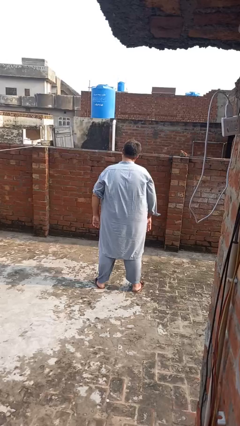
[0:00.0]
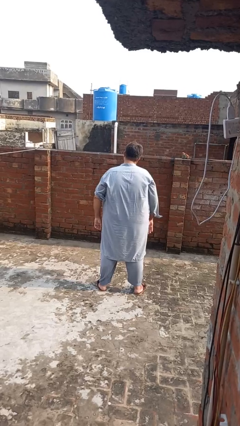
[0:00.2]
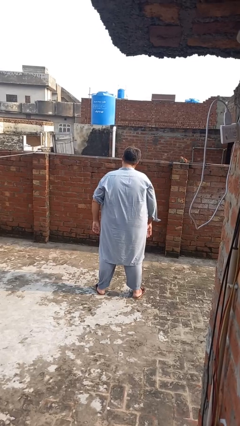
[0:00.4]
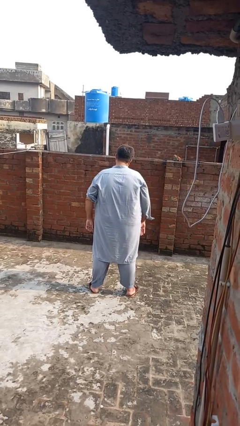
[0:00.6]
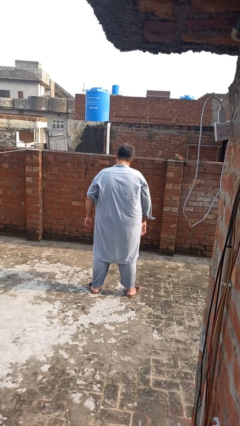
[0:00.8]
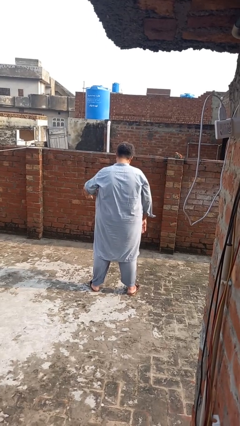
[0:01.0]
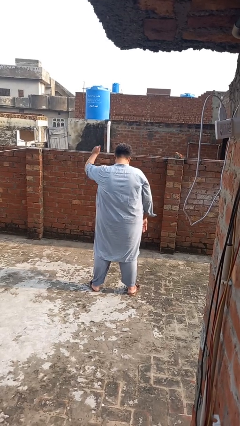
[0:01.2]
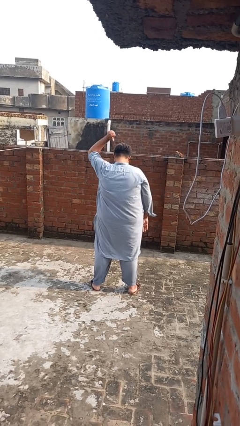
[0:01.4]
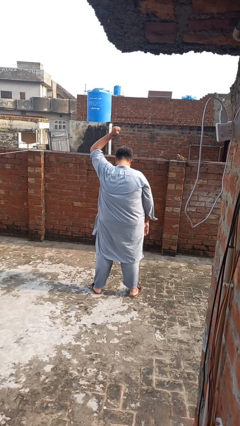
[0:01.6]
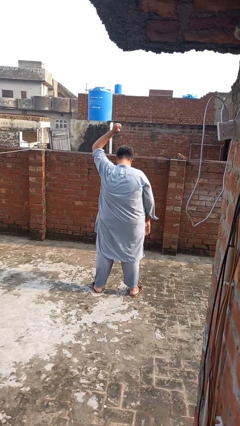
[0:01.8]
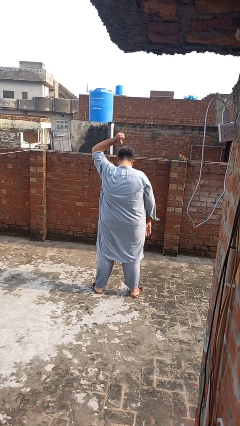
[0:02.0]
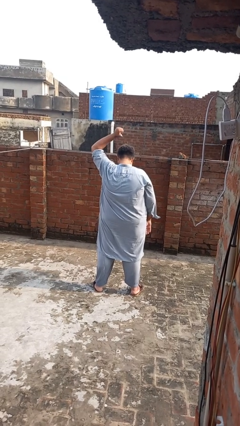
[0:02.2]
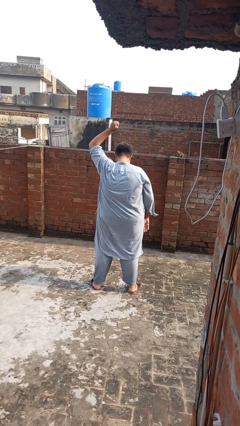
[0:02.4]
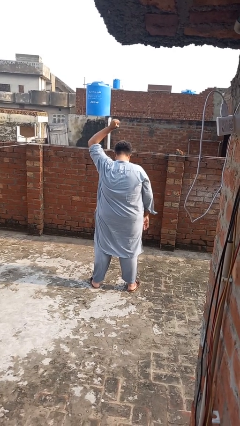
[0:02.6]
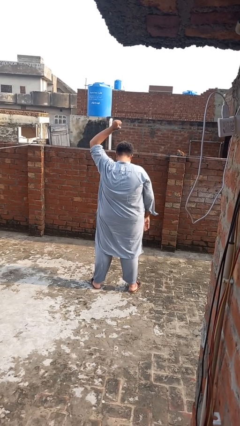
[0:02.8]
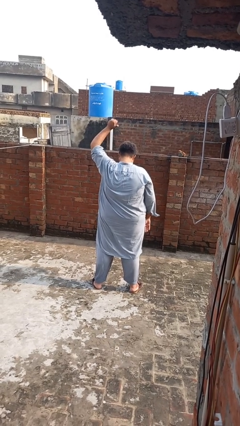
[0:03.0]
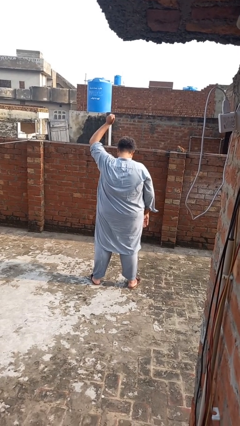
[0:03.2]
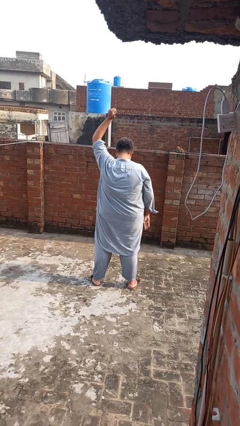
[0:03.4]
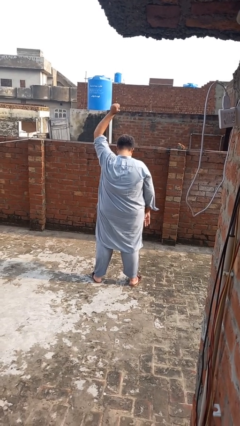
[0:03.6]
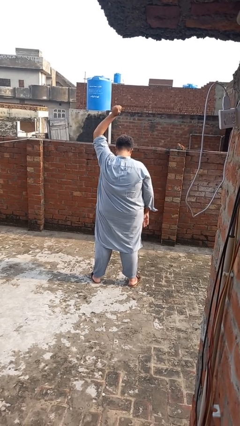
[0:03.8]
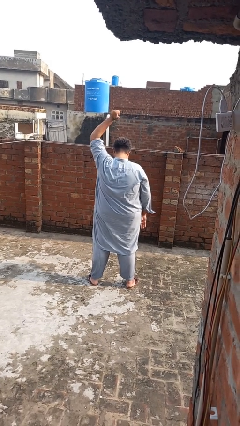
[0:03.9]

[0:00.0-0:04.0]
person gestures behind me

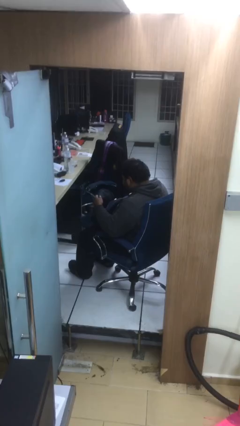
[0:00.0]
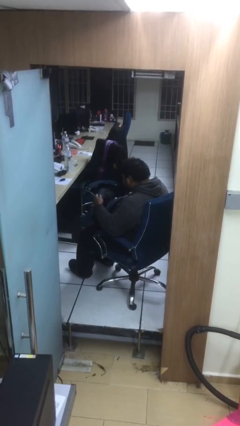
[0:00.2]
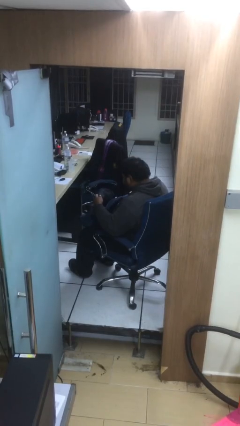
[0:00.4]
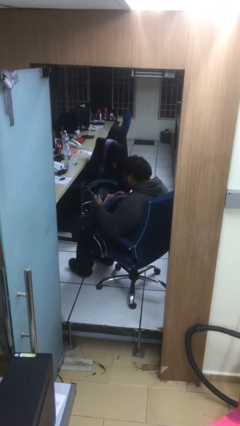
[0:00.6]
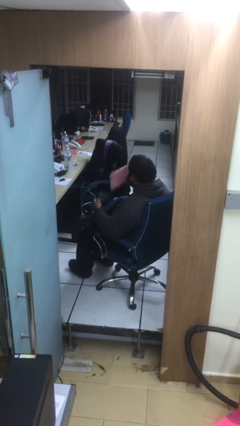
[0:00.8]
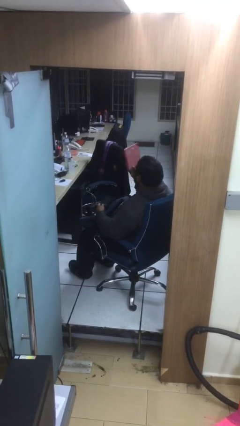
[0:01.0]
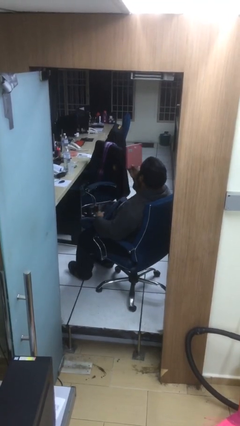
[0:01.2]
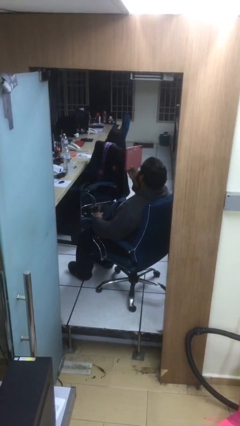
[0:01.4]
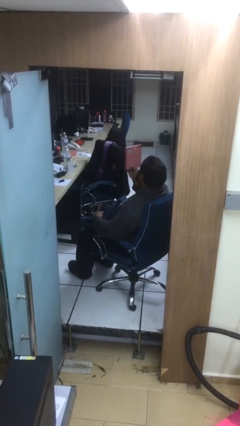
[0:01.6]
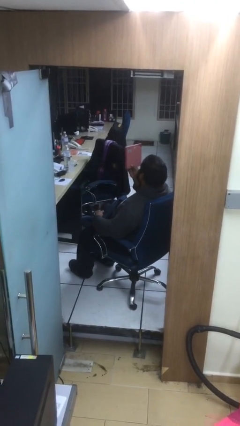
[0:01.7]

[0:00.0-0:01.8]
person takes object from backpack

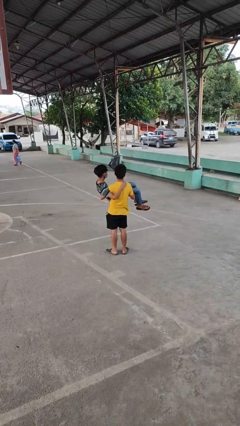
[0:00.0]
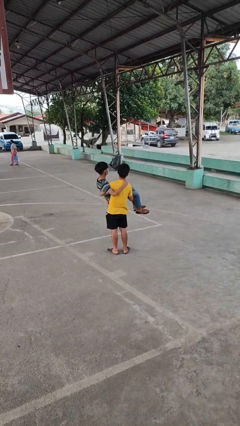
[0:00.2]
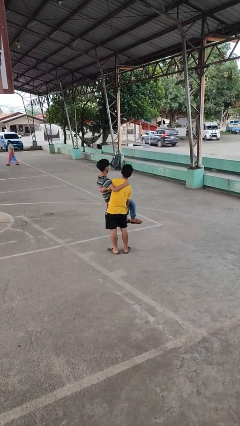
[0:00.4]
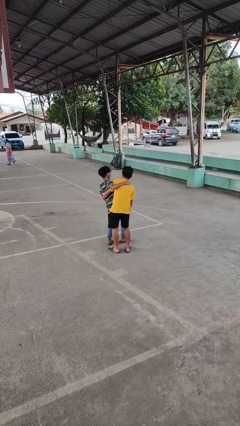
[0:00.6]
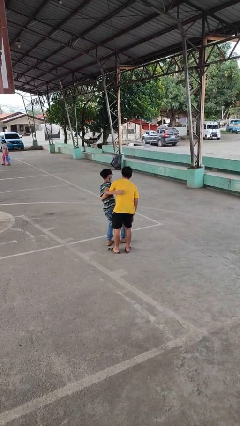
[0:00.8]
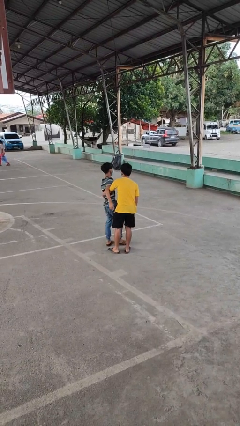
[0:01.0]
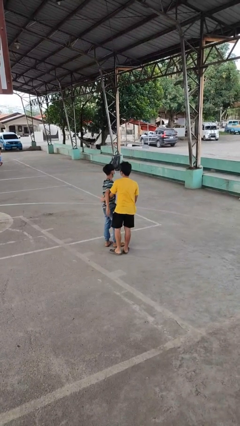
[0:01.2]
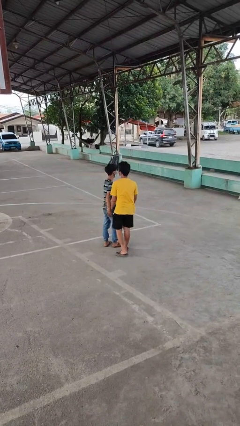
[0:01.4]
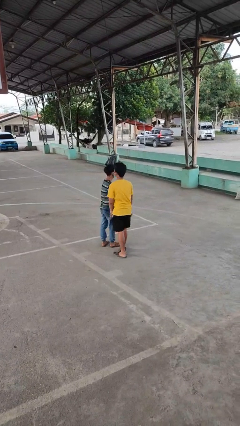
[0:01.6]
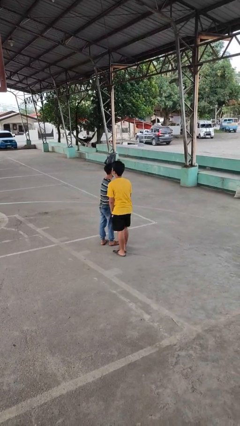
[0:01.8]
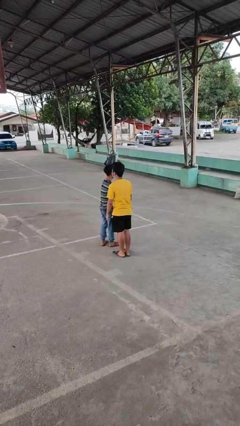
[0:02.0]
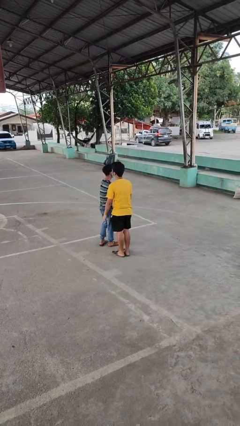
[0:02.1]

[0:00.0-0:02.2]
person puts down person

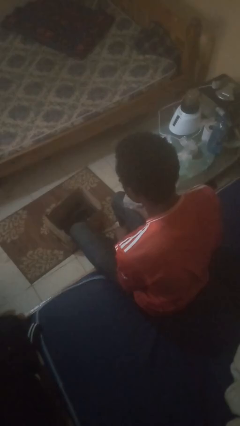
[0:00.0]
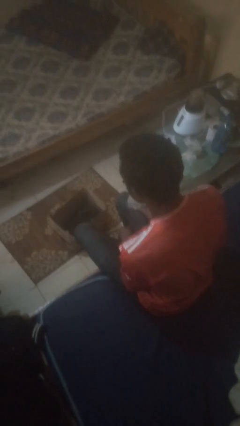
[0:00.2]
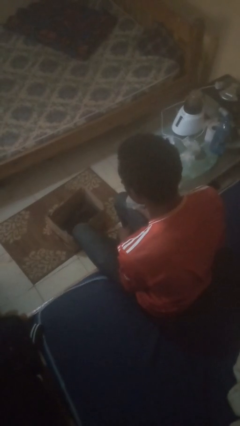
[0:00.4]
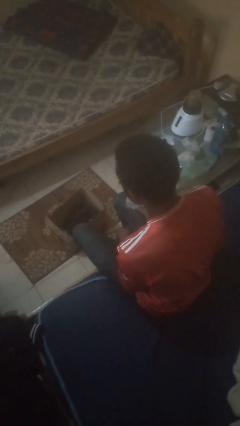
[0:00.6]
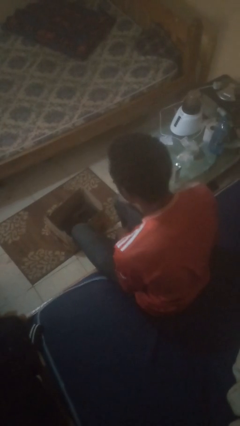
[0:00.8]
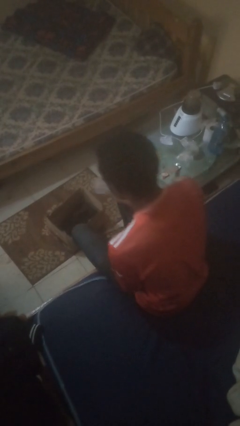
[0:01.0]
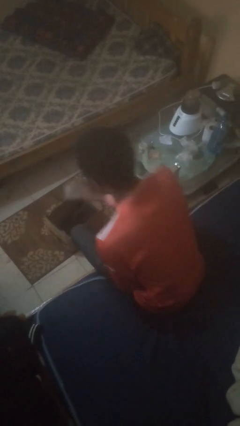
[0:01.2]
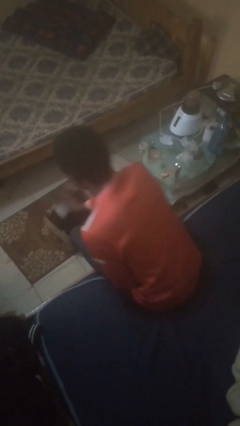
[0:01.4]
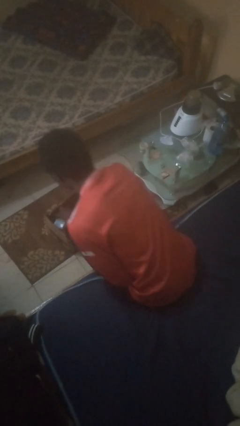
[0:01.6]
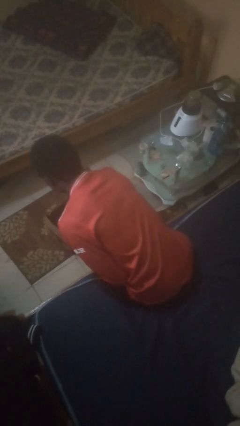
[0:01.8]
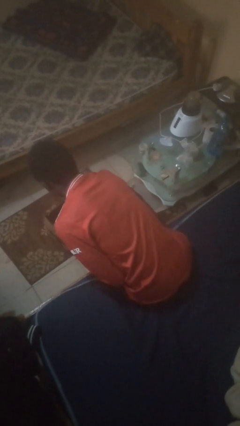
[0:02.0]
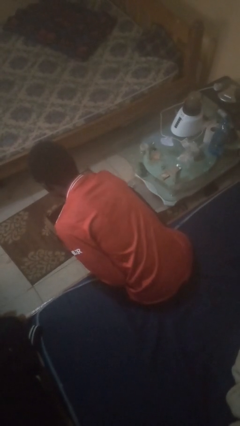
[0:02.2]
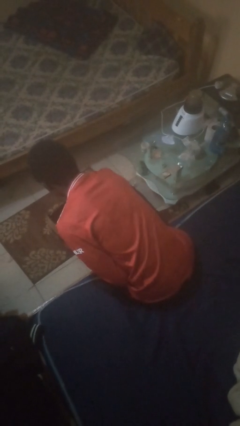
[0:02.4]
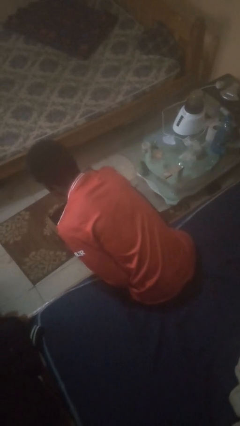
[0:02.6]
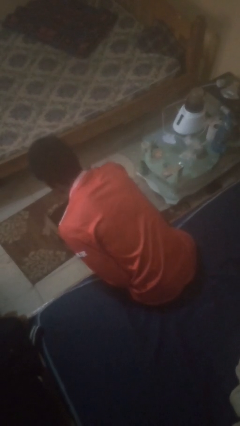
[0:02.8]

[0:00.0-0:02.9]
person puts object into box

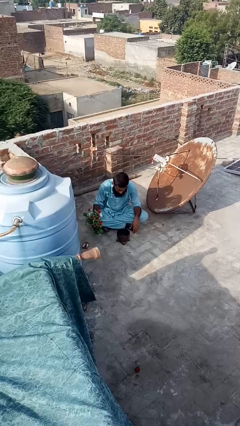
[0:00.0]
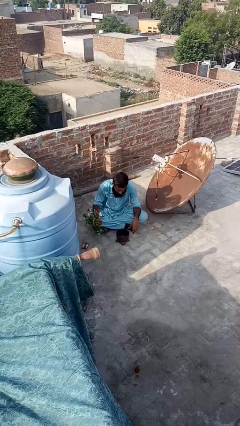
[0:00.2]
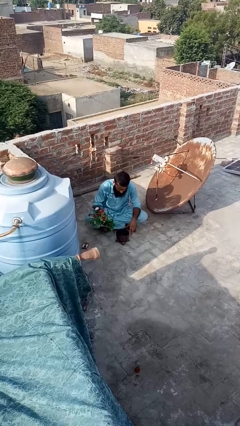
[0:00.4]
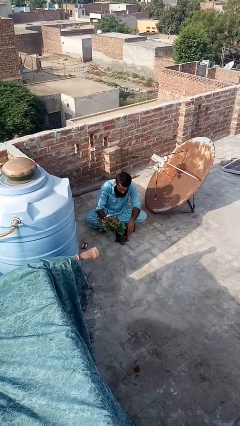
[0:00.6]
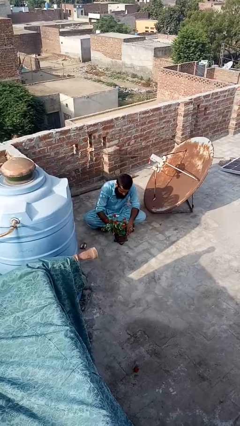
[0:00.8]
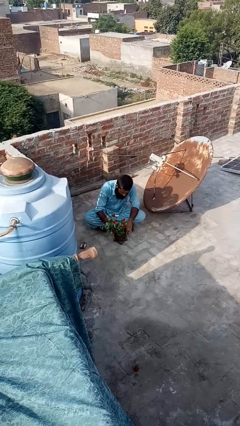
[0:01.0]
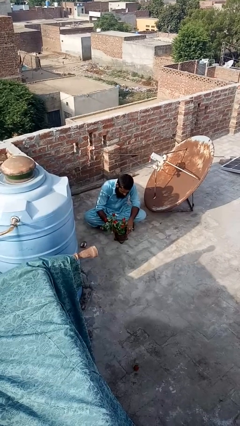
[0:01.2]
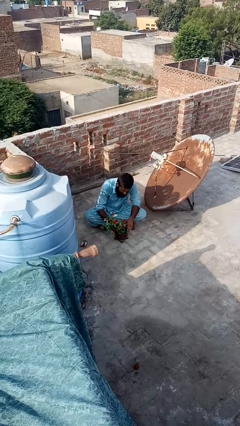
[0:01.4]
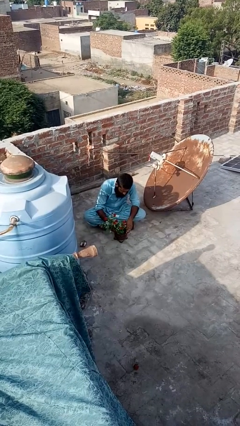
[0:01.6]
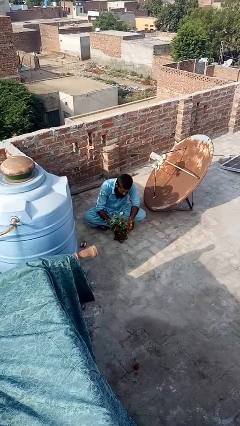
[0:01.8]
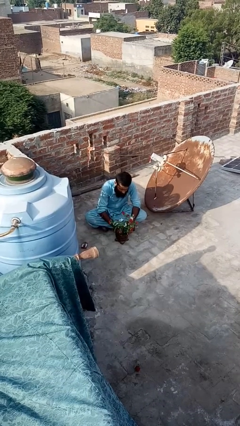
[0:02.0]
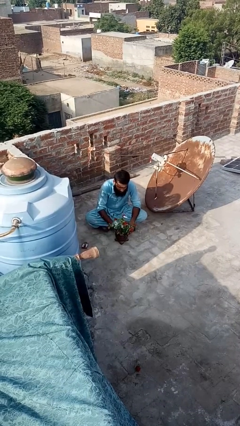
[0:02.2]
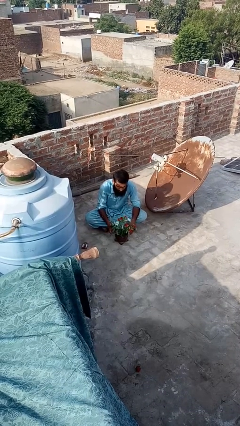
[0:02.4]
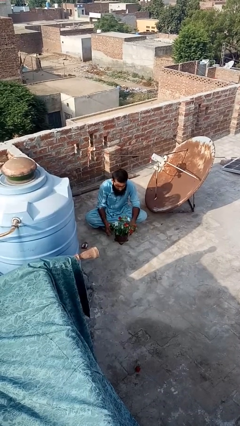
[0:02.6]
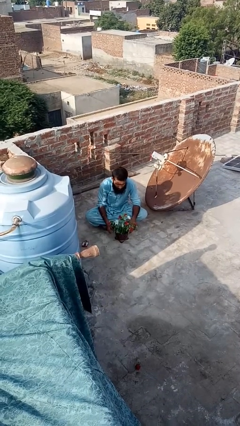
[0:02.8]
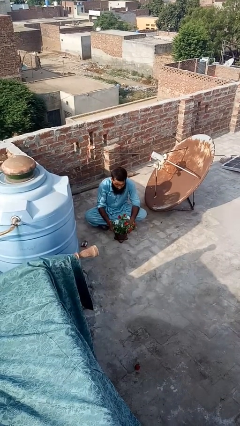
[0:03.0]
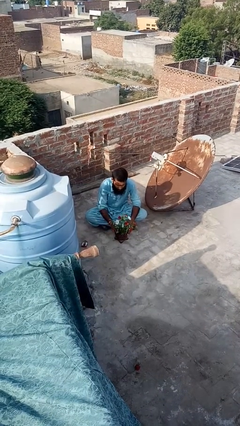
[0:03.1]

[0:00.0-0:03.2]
person arranges flowers in vase

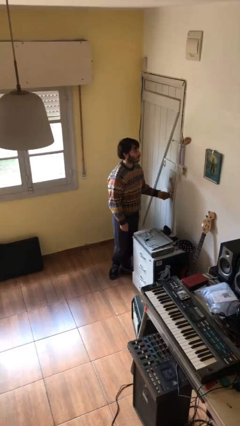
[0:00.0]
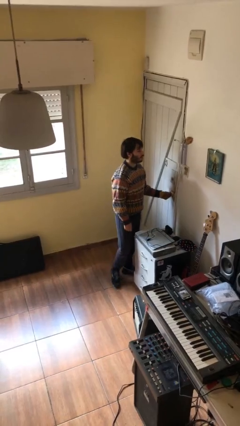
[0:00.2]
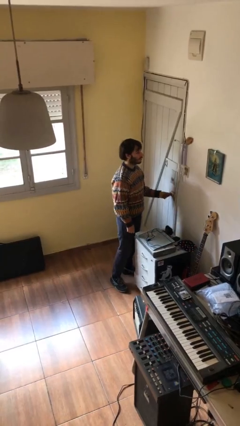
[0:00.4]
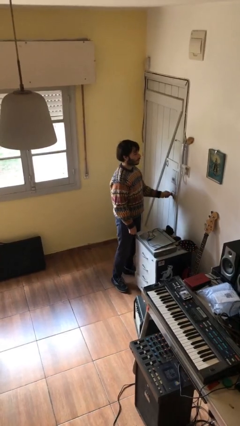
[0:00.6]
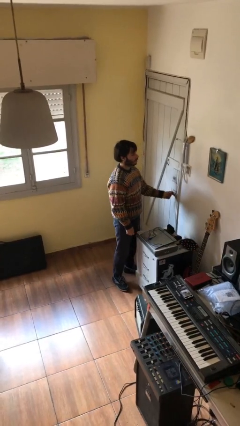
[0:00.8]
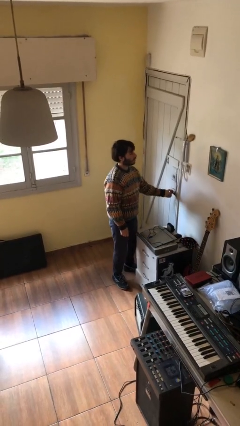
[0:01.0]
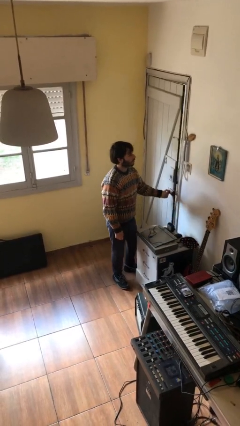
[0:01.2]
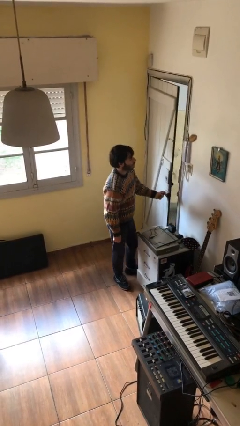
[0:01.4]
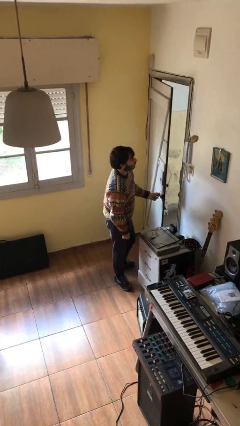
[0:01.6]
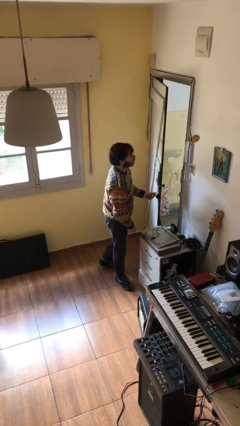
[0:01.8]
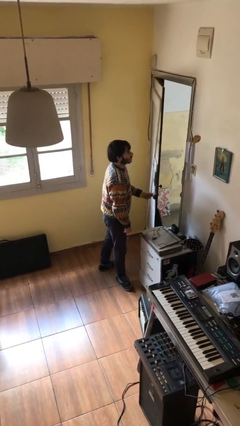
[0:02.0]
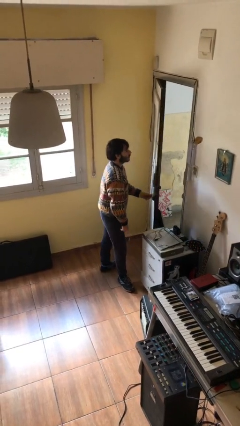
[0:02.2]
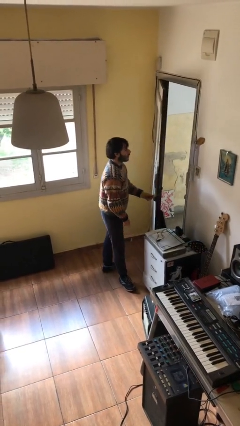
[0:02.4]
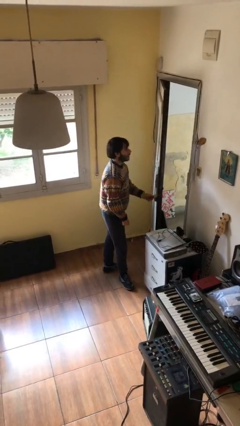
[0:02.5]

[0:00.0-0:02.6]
person opens facility door

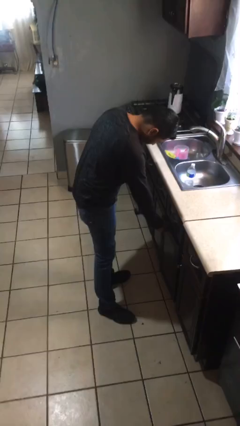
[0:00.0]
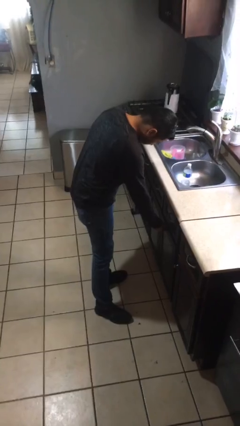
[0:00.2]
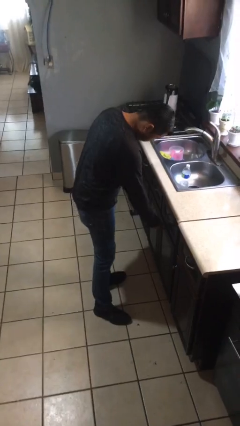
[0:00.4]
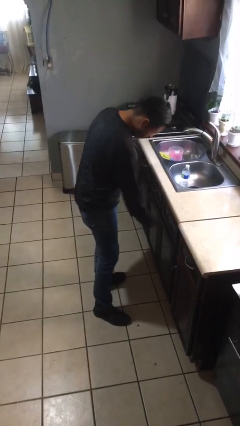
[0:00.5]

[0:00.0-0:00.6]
person closes cabinet
